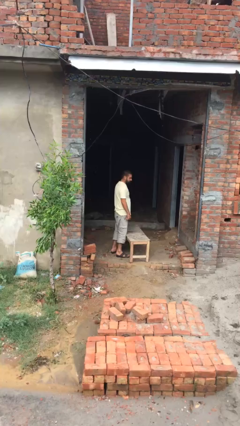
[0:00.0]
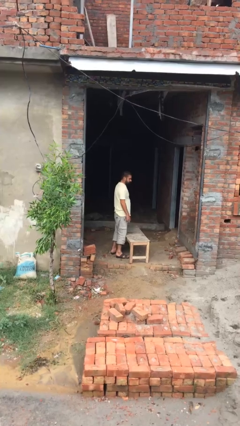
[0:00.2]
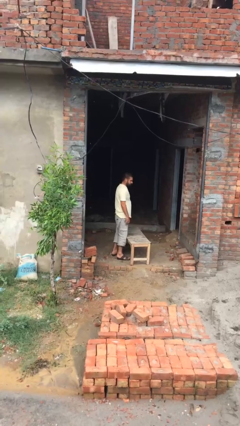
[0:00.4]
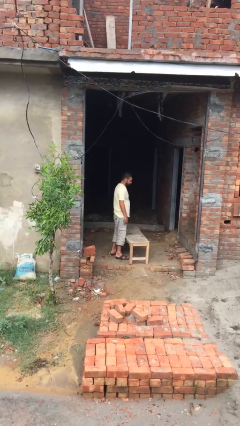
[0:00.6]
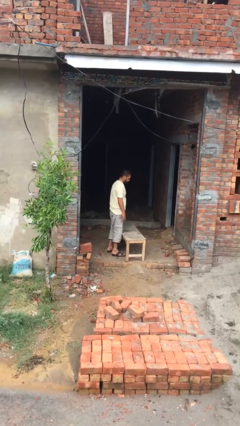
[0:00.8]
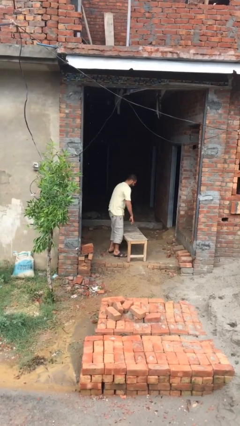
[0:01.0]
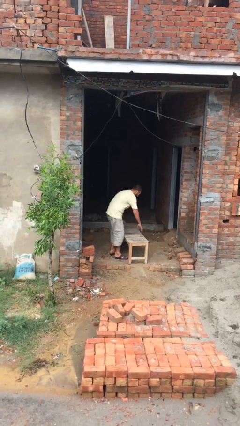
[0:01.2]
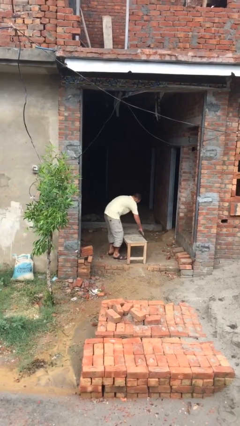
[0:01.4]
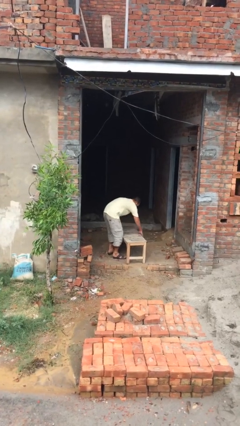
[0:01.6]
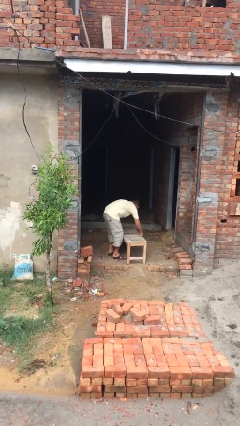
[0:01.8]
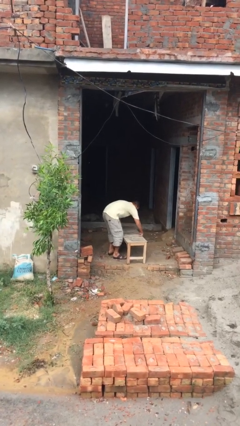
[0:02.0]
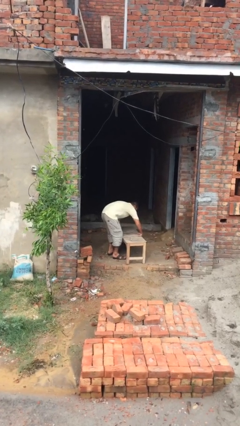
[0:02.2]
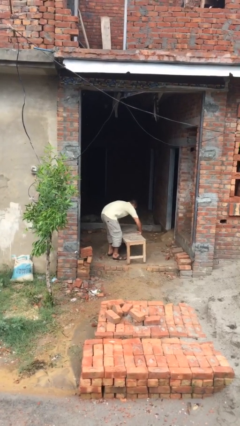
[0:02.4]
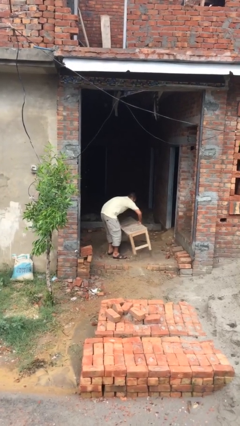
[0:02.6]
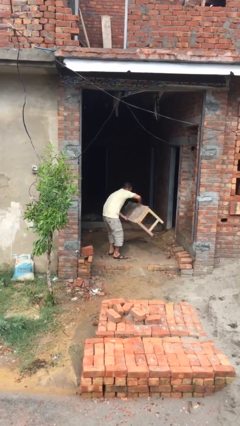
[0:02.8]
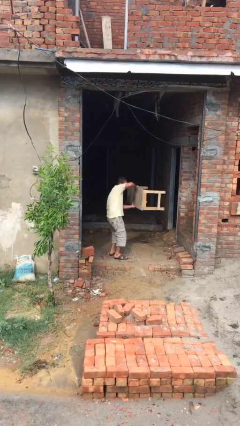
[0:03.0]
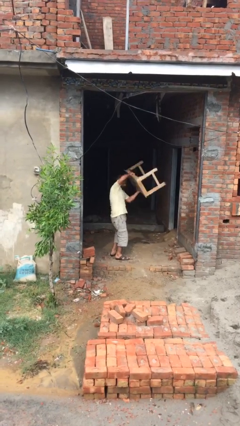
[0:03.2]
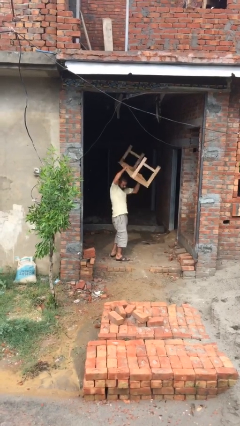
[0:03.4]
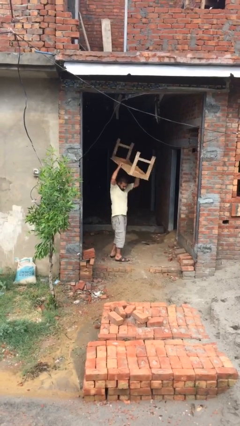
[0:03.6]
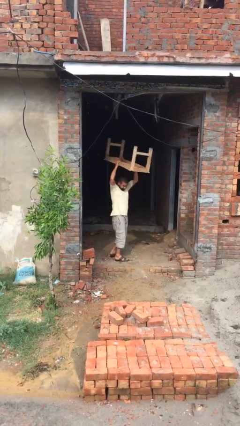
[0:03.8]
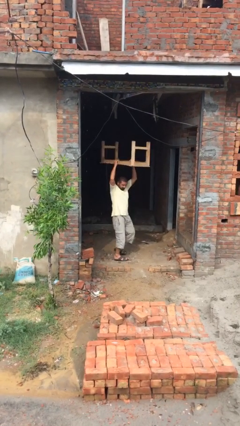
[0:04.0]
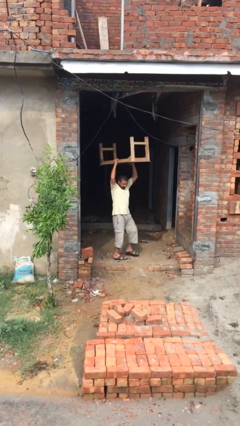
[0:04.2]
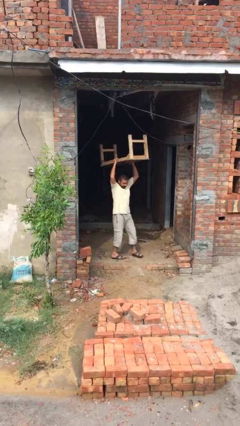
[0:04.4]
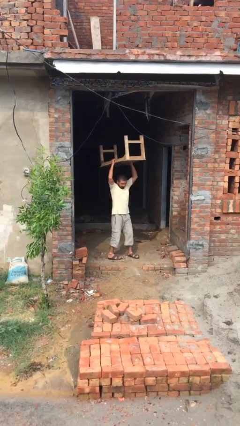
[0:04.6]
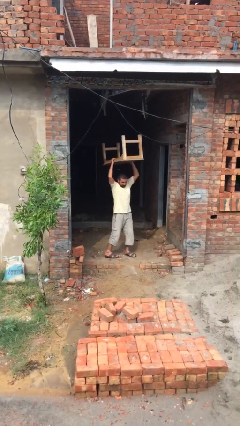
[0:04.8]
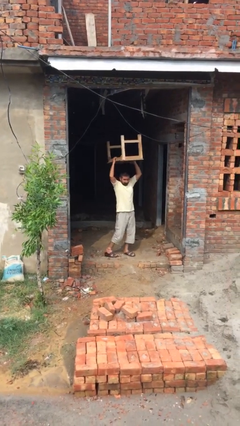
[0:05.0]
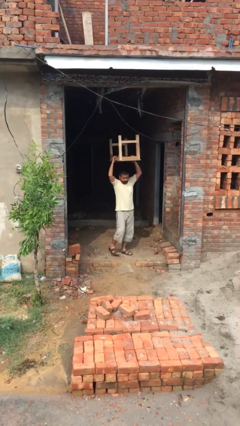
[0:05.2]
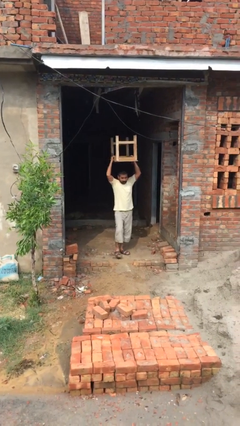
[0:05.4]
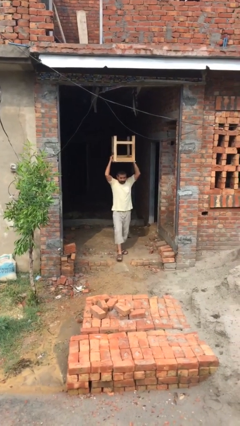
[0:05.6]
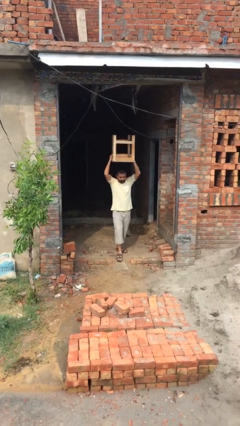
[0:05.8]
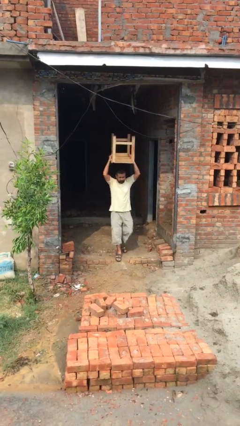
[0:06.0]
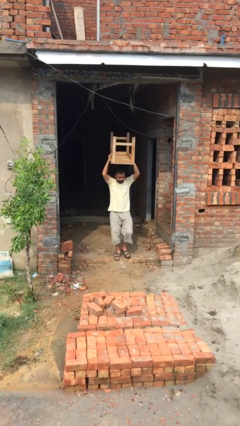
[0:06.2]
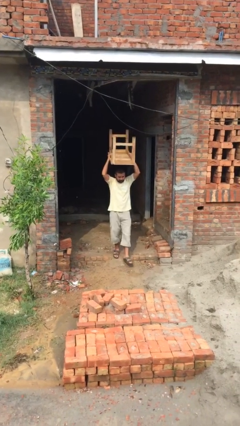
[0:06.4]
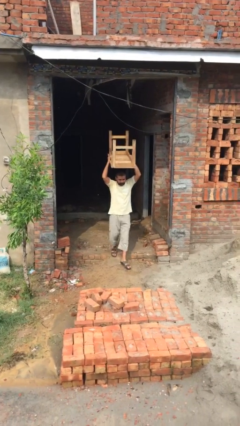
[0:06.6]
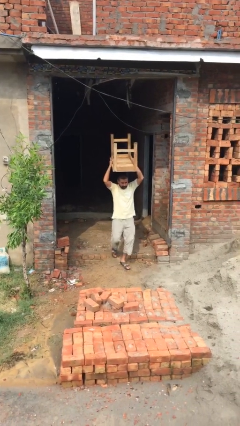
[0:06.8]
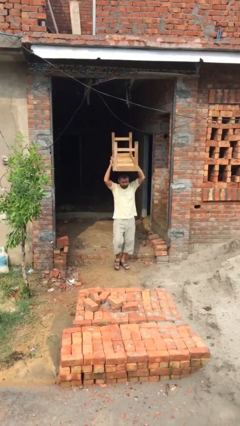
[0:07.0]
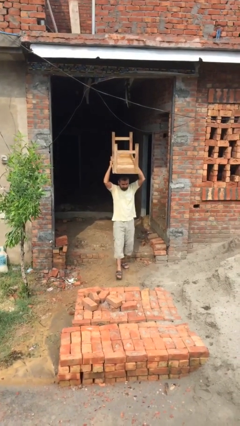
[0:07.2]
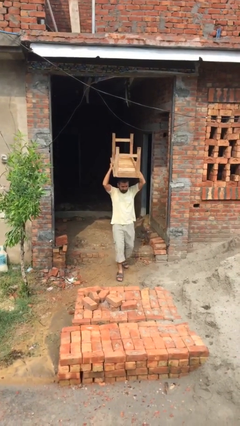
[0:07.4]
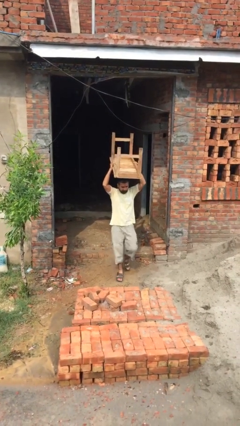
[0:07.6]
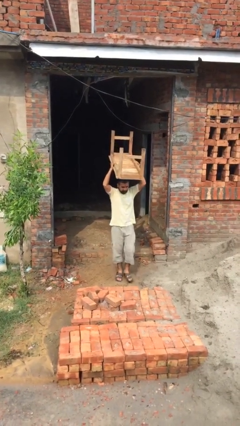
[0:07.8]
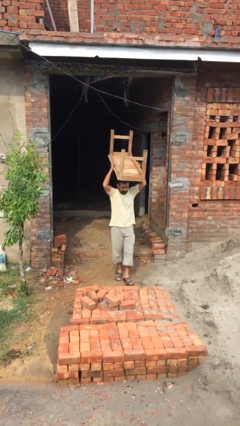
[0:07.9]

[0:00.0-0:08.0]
person carries heavy object

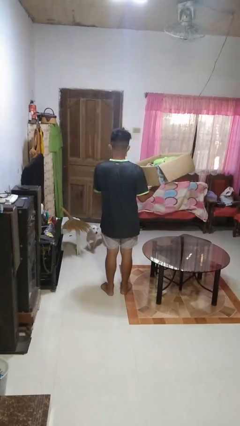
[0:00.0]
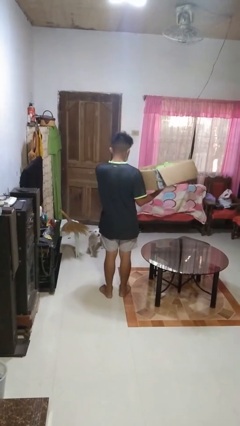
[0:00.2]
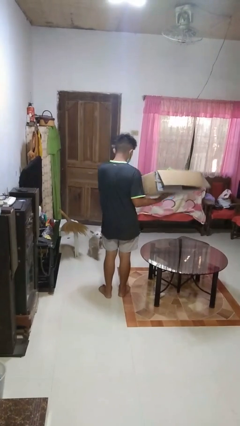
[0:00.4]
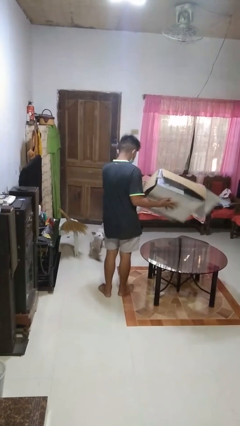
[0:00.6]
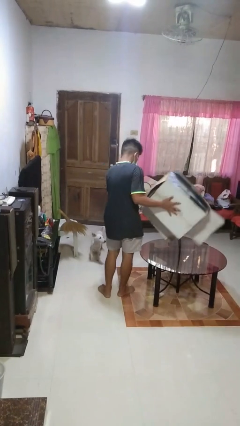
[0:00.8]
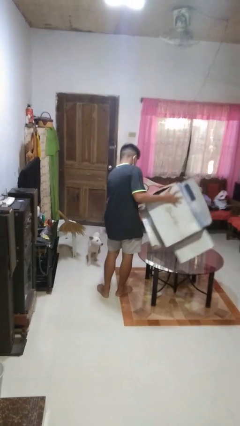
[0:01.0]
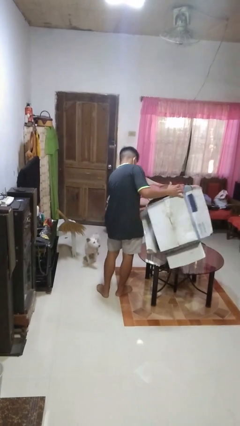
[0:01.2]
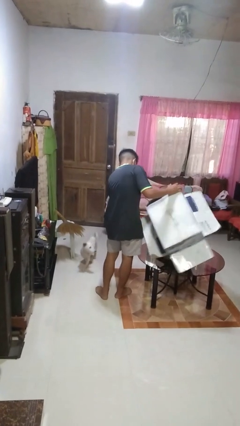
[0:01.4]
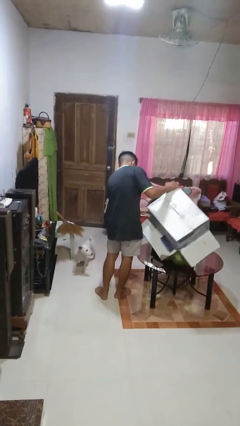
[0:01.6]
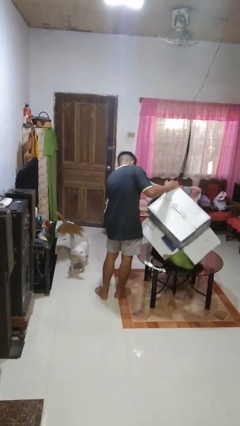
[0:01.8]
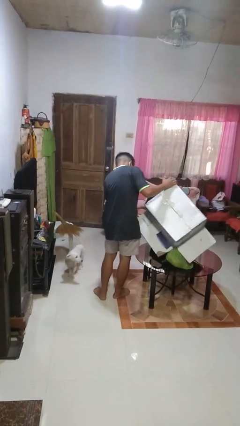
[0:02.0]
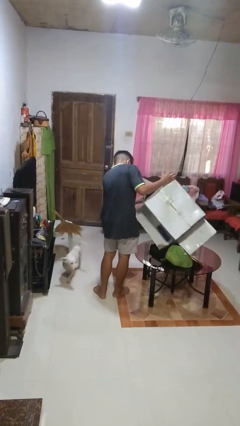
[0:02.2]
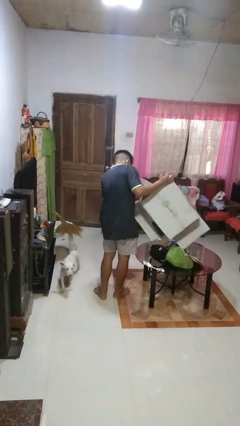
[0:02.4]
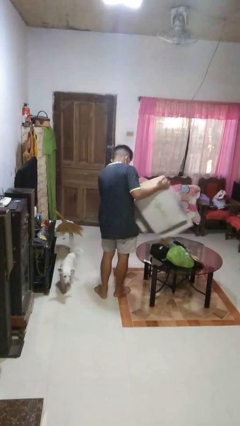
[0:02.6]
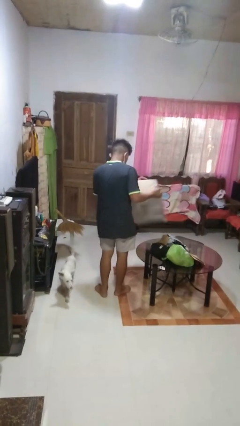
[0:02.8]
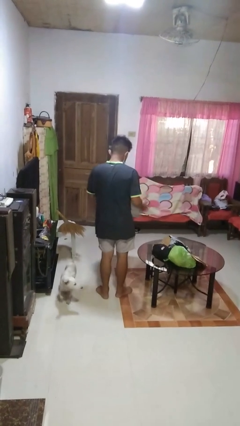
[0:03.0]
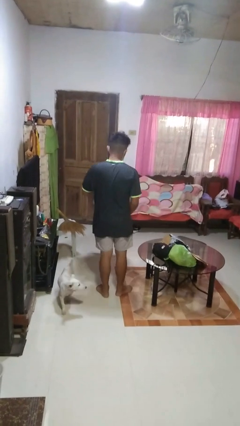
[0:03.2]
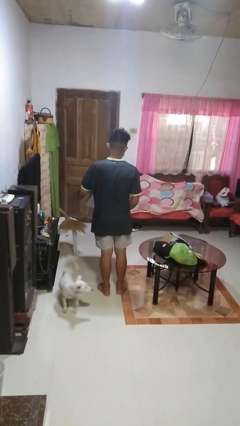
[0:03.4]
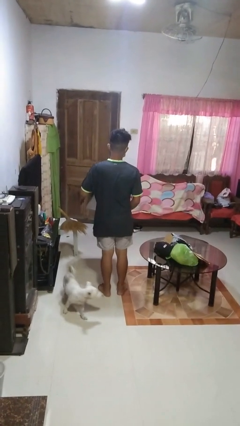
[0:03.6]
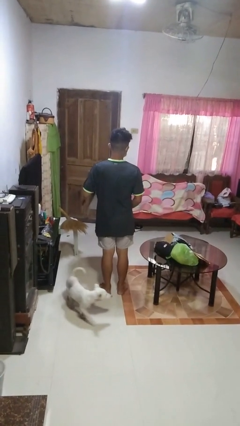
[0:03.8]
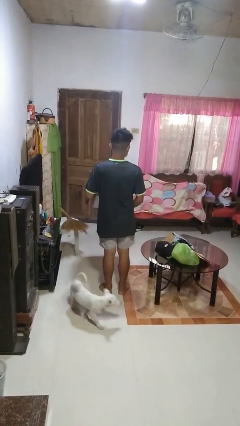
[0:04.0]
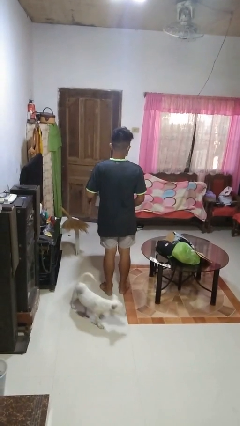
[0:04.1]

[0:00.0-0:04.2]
person unloads box onto table

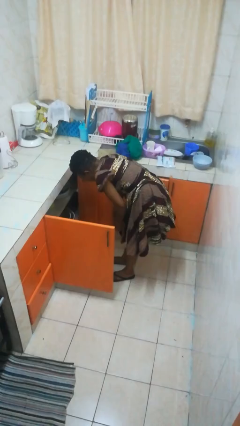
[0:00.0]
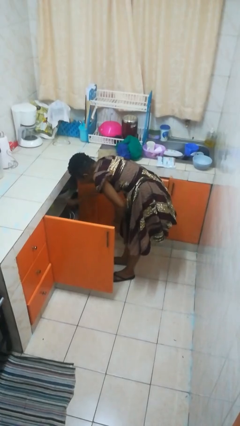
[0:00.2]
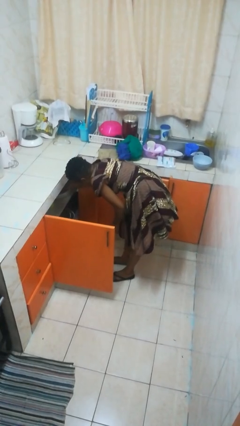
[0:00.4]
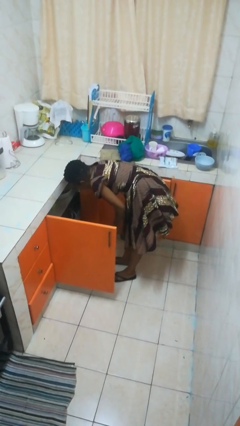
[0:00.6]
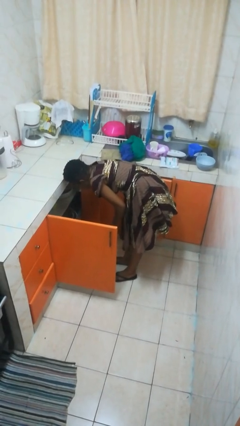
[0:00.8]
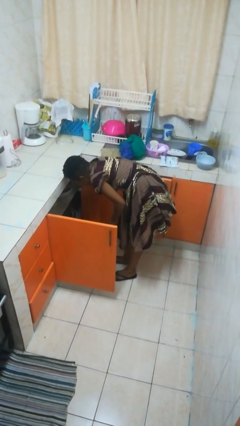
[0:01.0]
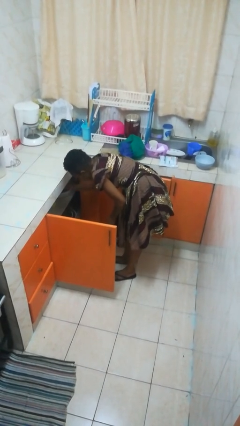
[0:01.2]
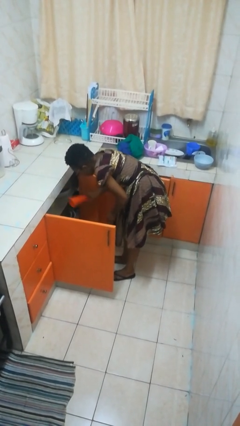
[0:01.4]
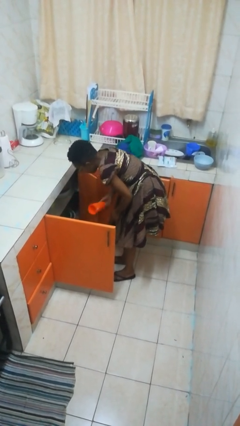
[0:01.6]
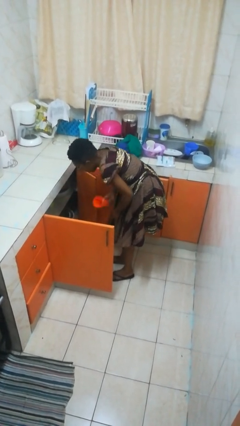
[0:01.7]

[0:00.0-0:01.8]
person takes object from cabinet

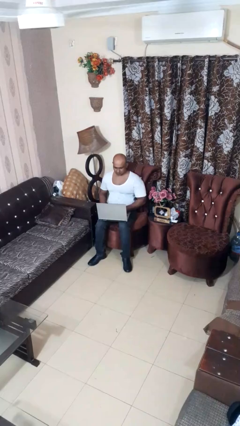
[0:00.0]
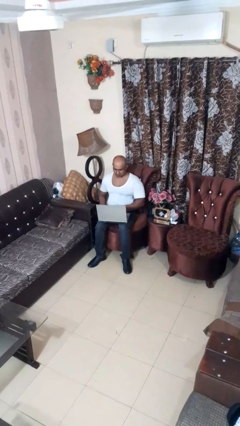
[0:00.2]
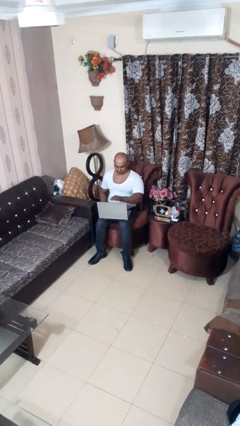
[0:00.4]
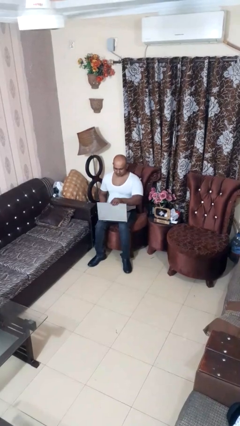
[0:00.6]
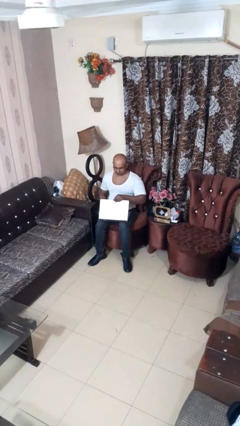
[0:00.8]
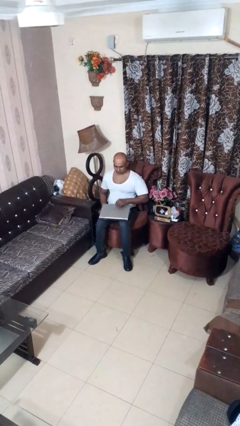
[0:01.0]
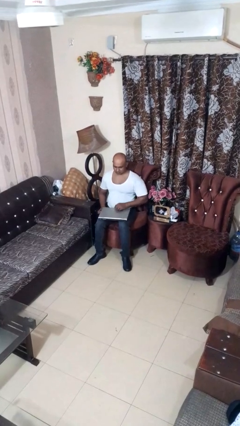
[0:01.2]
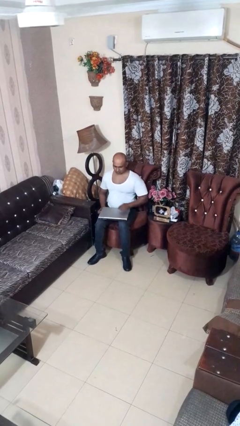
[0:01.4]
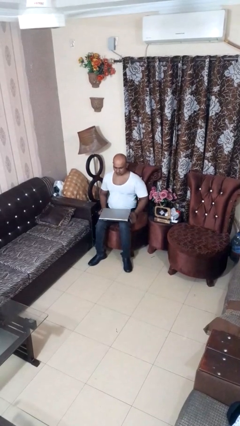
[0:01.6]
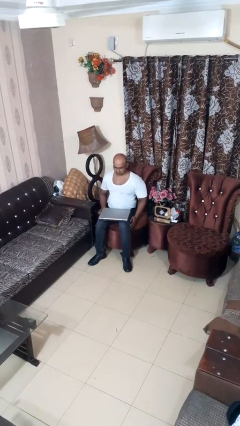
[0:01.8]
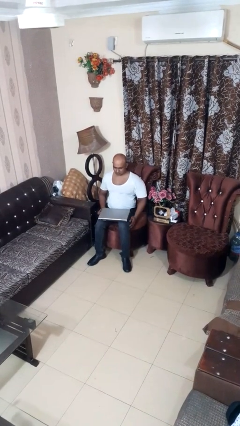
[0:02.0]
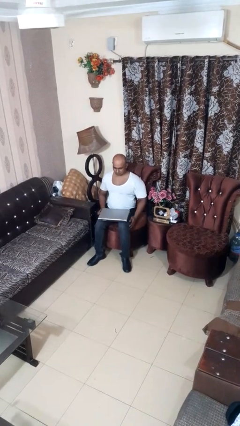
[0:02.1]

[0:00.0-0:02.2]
person closes laptop

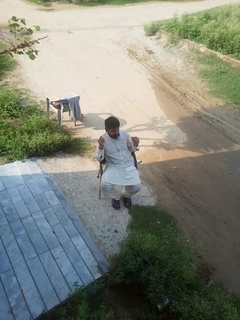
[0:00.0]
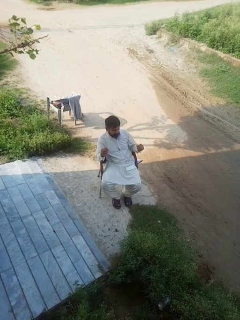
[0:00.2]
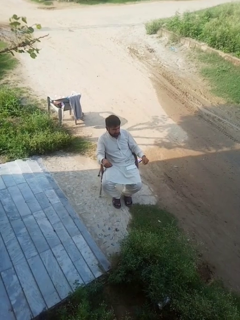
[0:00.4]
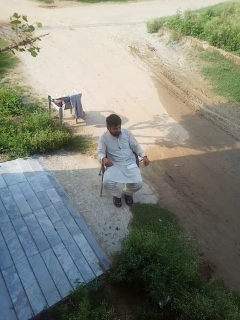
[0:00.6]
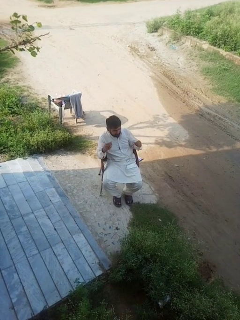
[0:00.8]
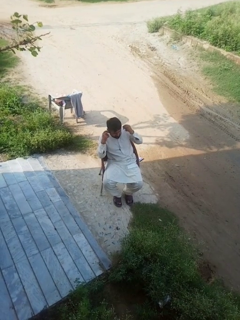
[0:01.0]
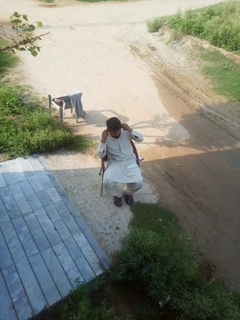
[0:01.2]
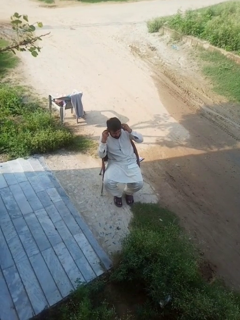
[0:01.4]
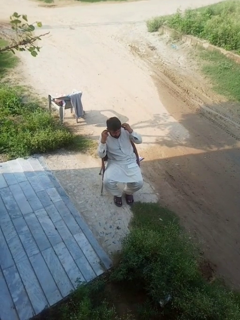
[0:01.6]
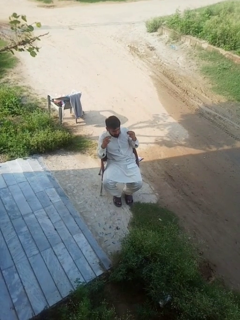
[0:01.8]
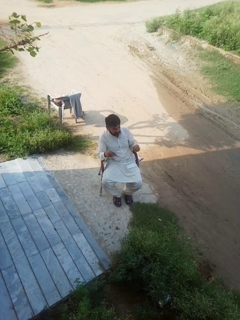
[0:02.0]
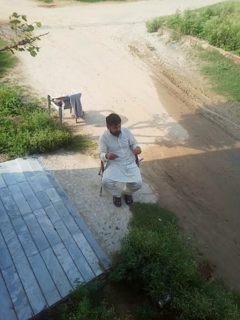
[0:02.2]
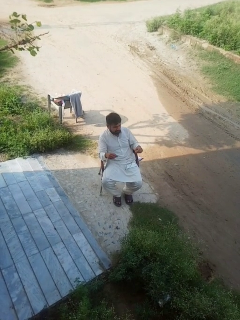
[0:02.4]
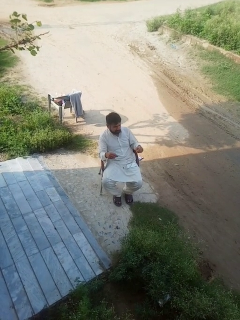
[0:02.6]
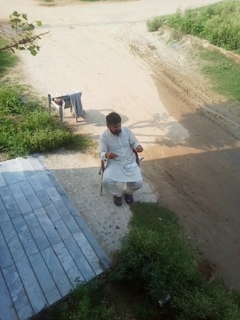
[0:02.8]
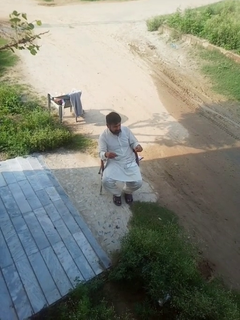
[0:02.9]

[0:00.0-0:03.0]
person takes off headphones
